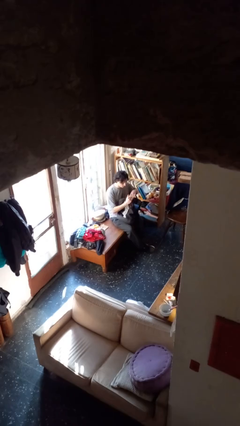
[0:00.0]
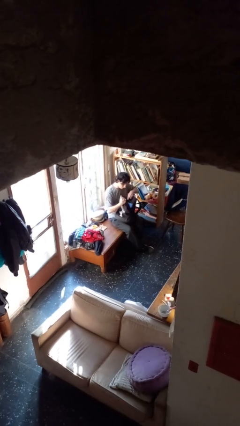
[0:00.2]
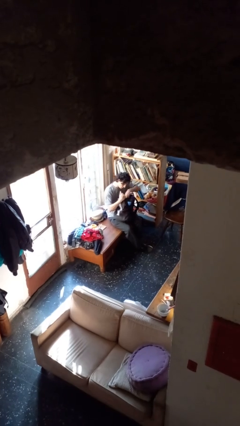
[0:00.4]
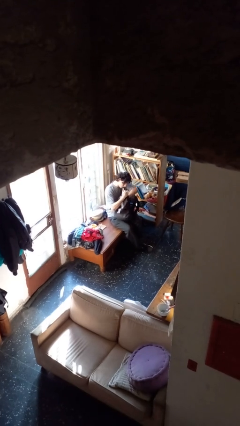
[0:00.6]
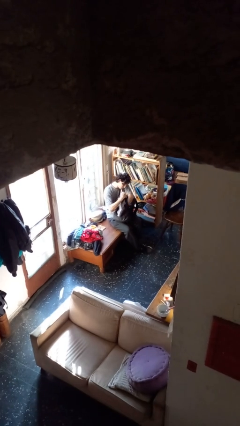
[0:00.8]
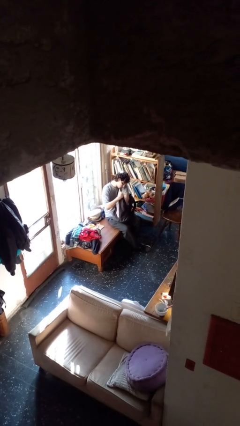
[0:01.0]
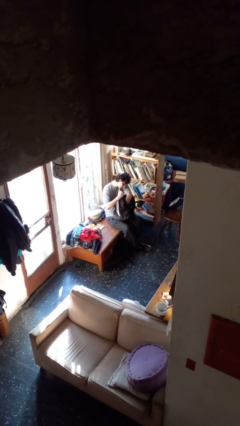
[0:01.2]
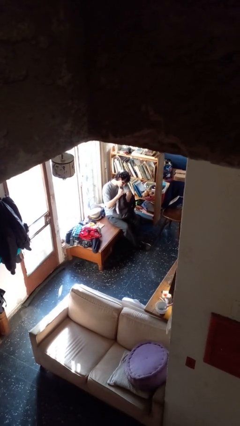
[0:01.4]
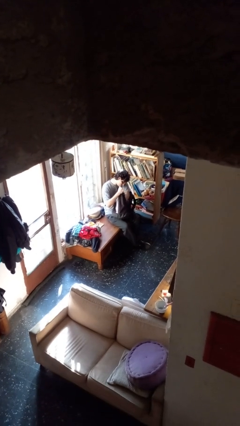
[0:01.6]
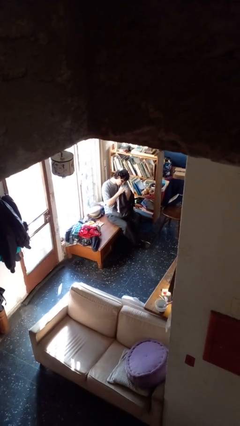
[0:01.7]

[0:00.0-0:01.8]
person searches in backpack

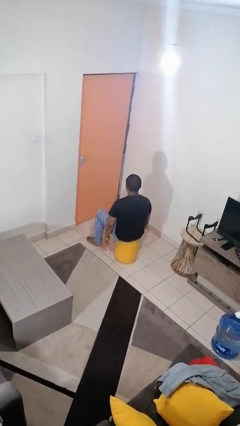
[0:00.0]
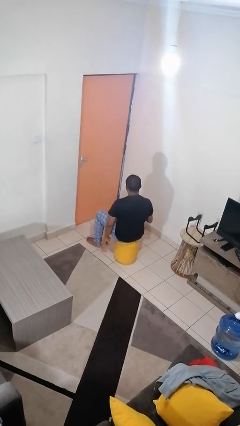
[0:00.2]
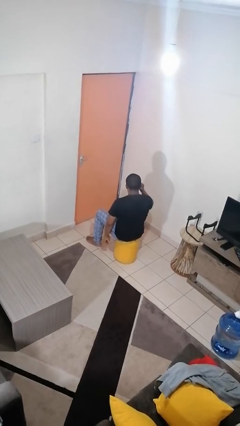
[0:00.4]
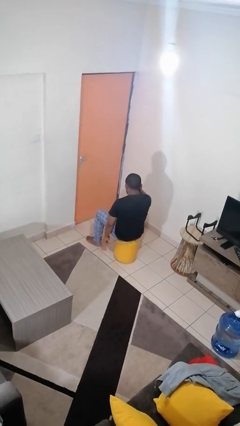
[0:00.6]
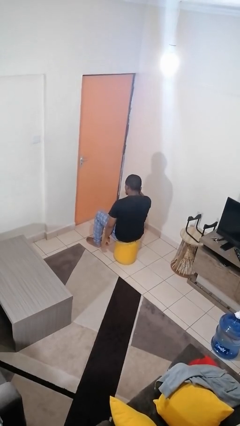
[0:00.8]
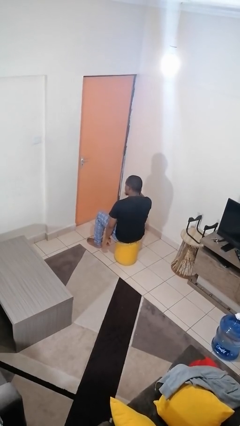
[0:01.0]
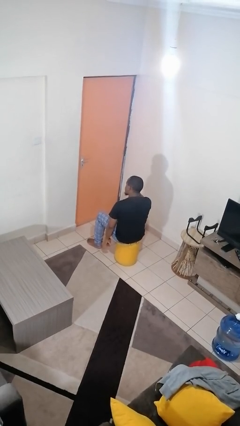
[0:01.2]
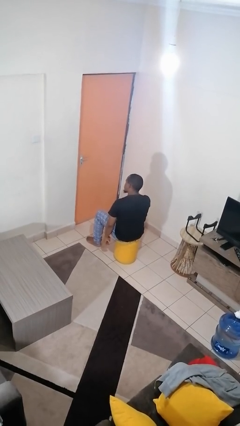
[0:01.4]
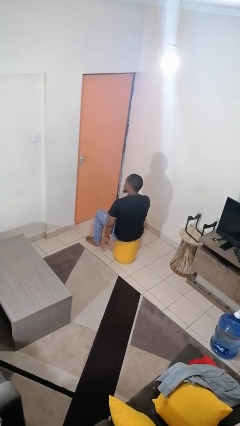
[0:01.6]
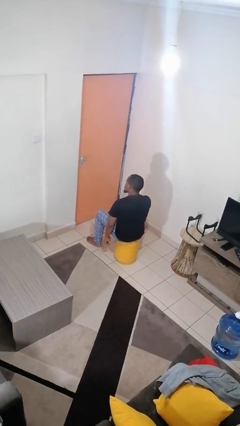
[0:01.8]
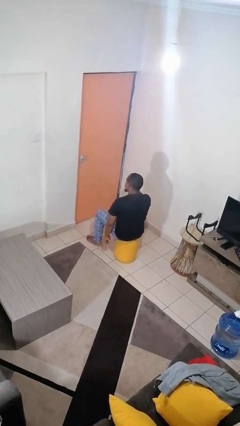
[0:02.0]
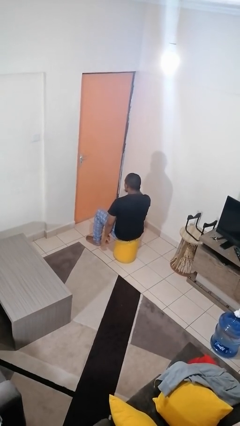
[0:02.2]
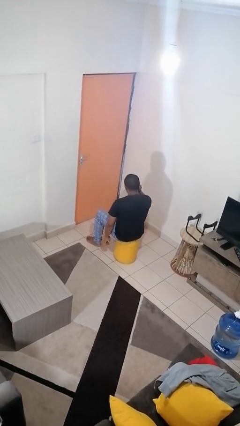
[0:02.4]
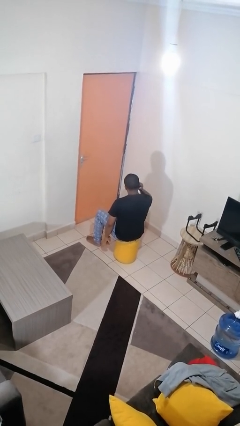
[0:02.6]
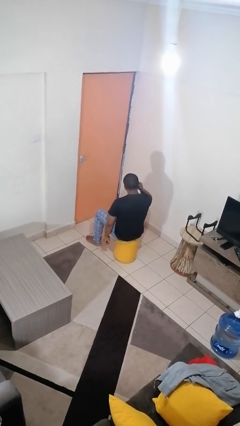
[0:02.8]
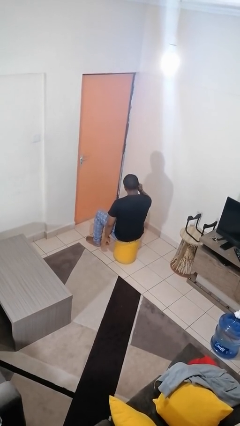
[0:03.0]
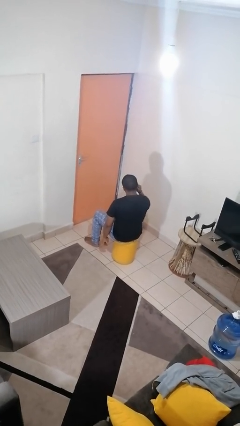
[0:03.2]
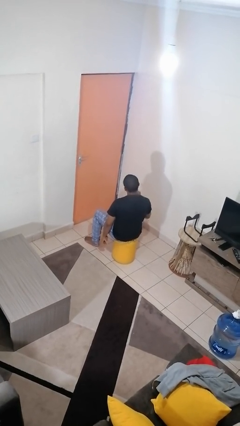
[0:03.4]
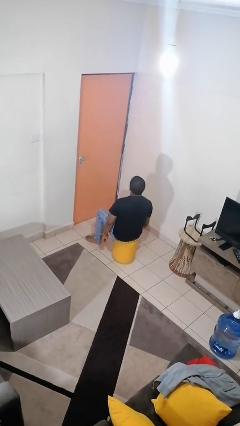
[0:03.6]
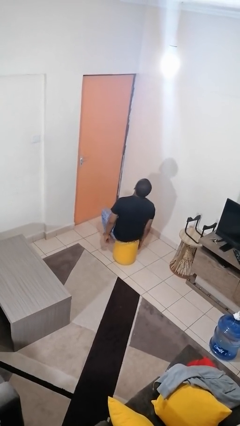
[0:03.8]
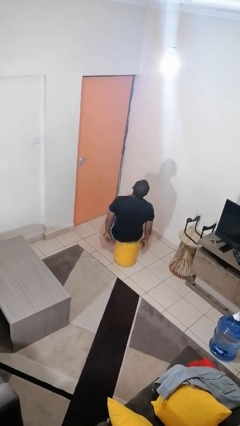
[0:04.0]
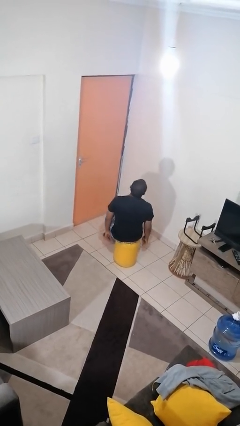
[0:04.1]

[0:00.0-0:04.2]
person touches earlobe

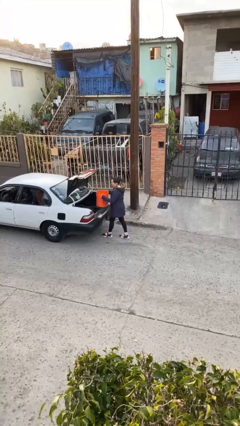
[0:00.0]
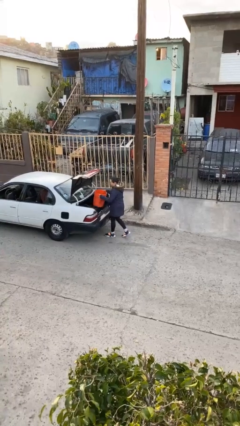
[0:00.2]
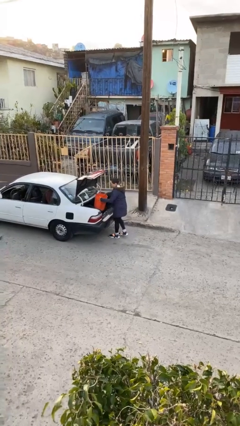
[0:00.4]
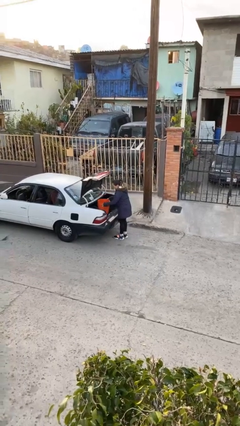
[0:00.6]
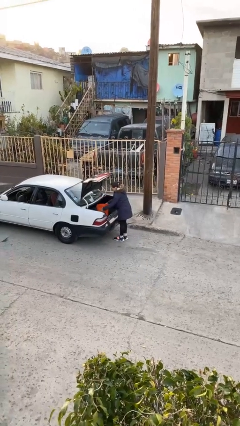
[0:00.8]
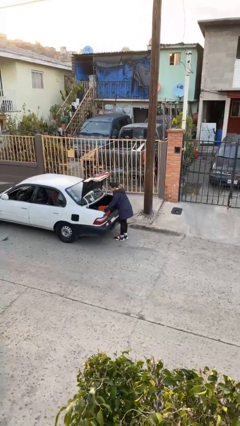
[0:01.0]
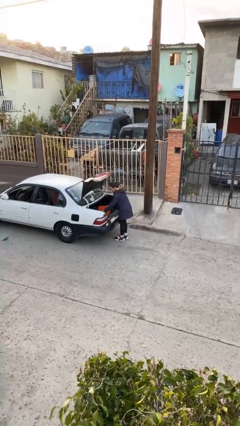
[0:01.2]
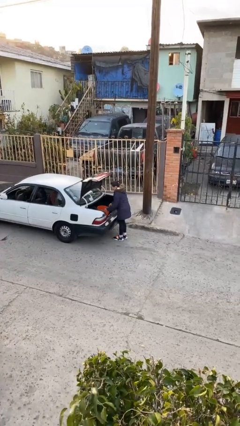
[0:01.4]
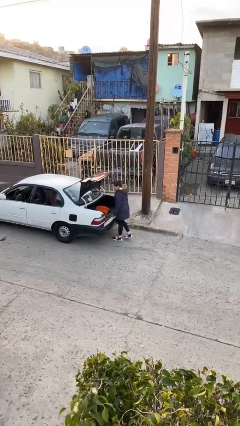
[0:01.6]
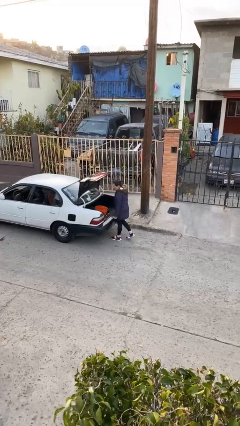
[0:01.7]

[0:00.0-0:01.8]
person loads car

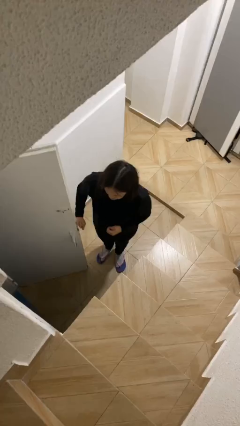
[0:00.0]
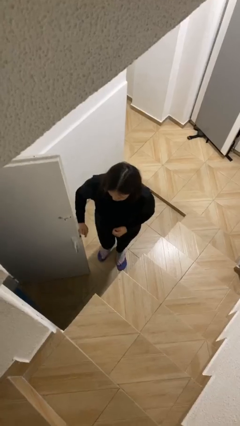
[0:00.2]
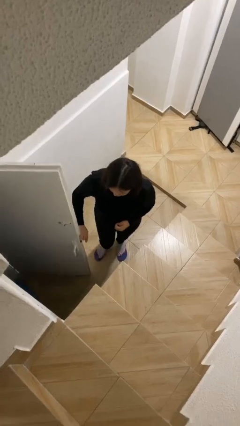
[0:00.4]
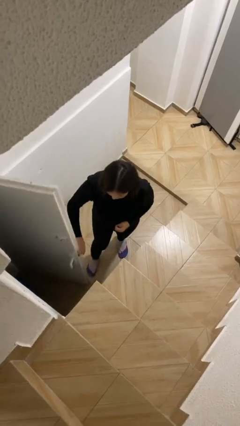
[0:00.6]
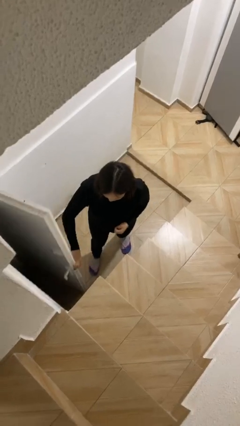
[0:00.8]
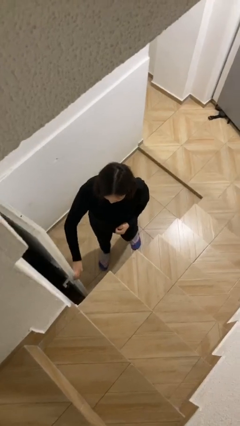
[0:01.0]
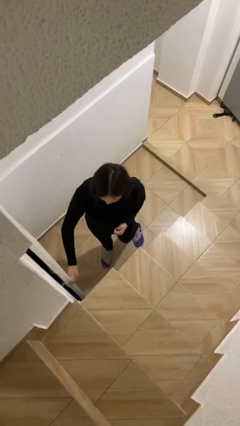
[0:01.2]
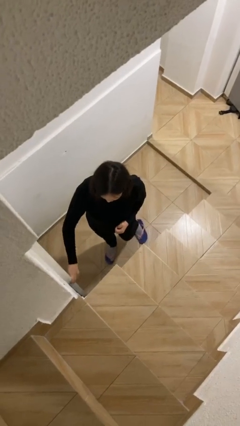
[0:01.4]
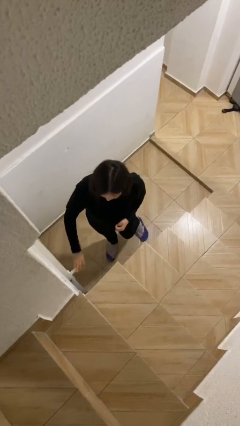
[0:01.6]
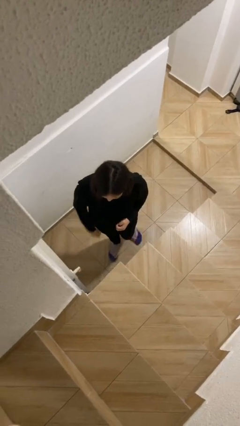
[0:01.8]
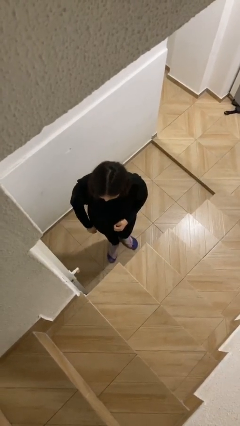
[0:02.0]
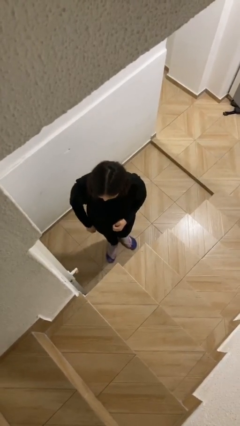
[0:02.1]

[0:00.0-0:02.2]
person closes facility door

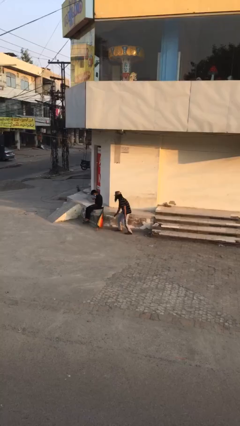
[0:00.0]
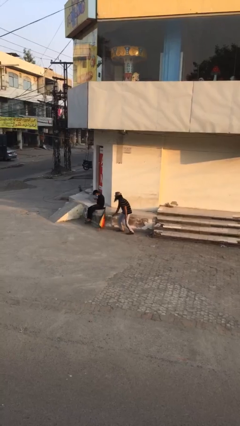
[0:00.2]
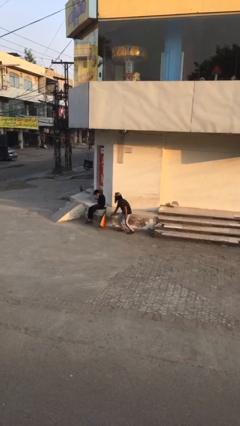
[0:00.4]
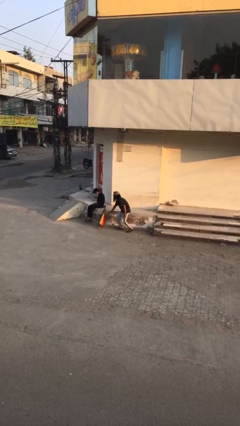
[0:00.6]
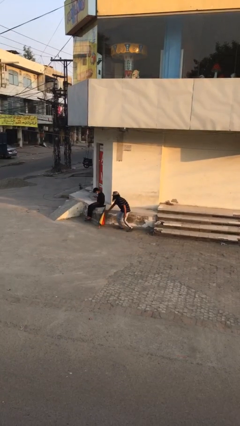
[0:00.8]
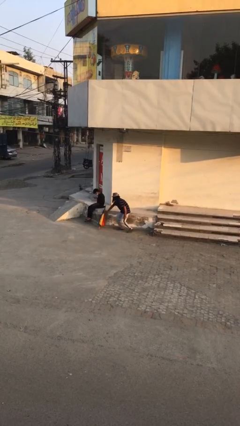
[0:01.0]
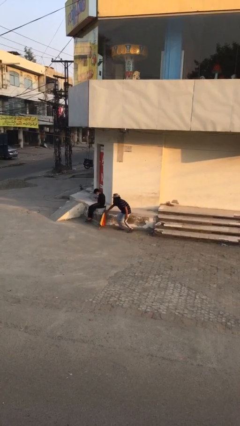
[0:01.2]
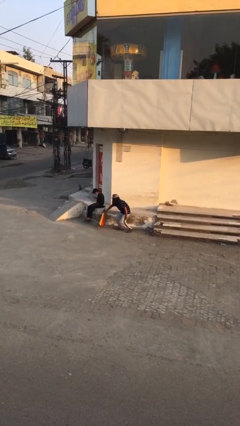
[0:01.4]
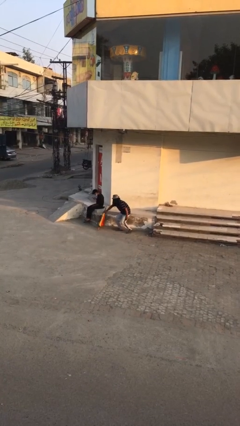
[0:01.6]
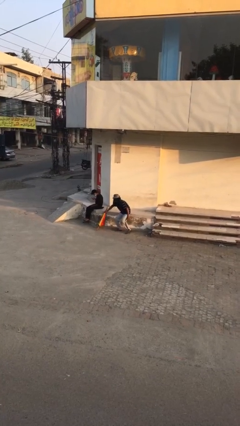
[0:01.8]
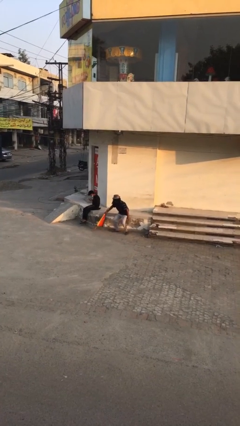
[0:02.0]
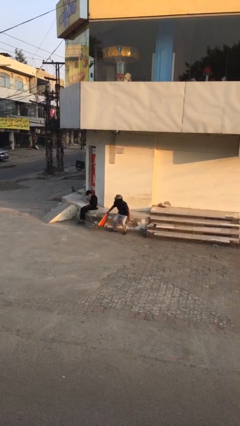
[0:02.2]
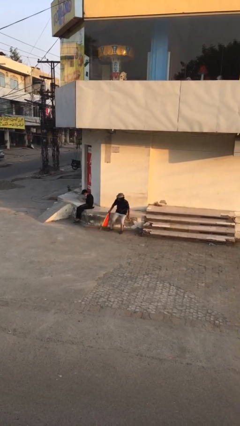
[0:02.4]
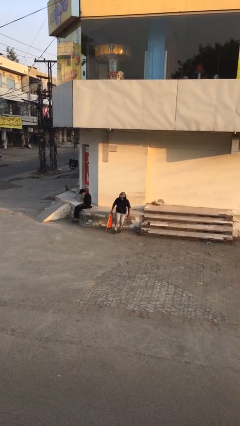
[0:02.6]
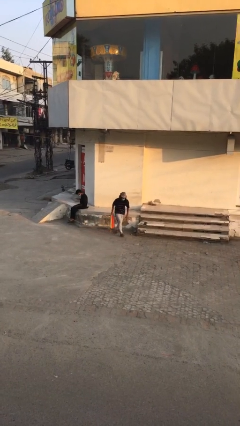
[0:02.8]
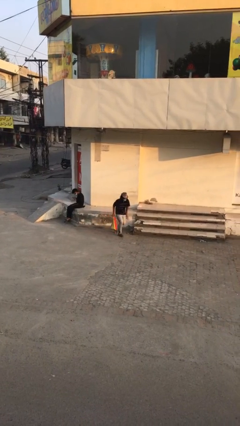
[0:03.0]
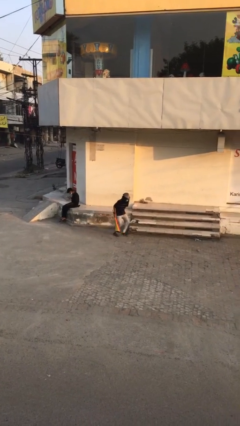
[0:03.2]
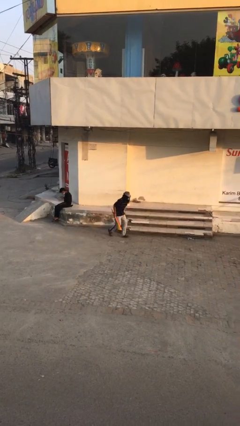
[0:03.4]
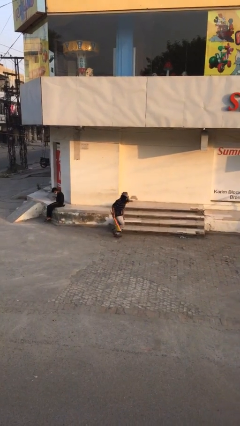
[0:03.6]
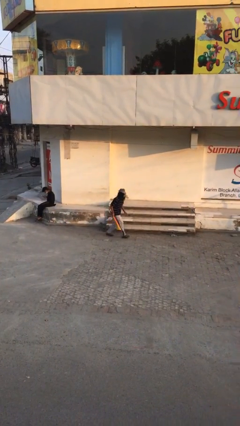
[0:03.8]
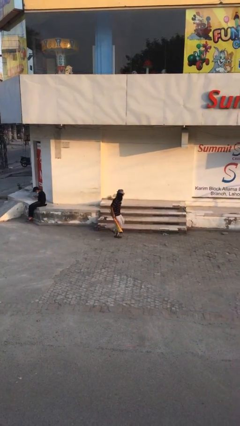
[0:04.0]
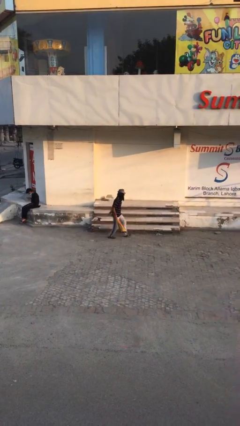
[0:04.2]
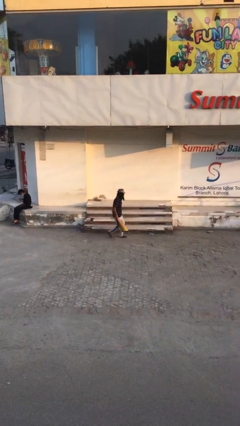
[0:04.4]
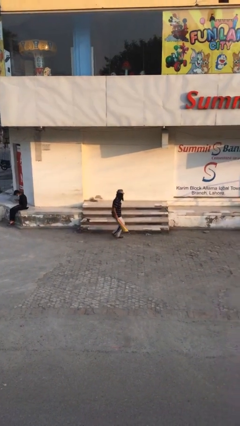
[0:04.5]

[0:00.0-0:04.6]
person steals object from person

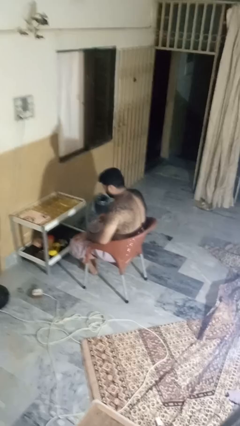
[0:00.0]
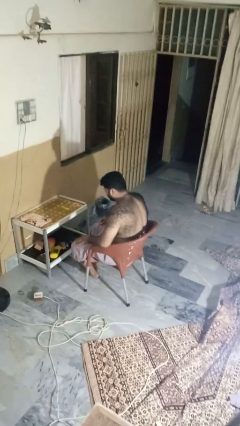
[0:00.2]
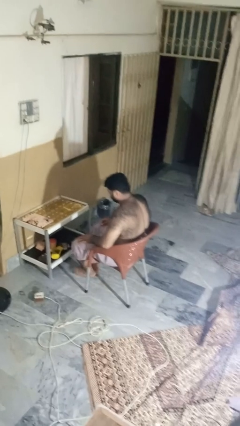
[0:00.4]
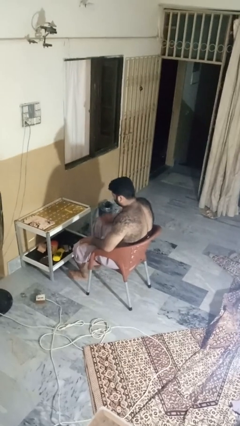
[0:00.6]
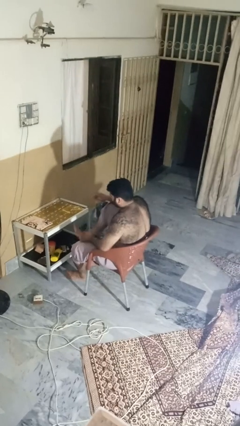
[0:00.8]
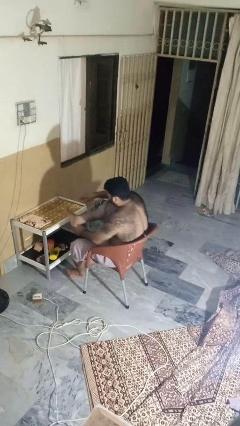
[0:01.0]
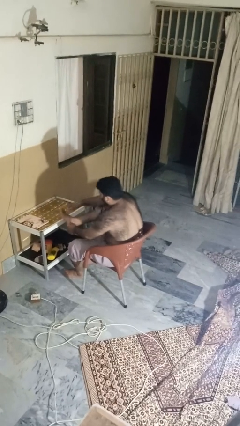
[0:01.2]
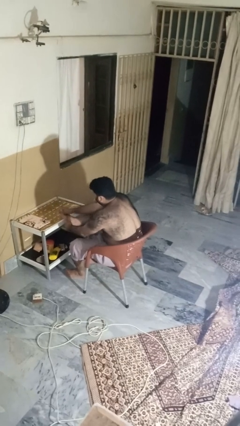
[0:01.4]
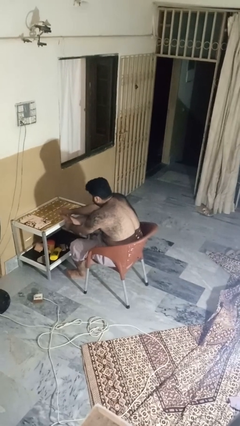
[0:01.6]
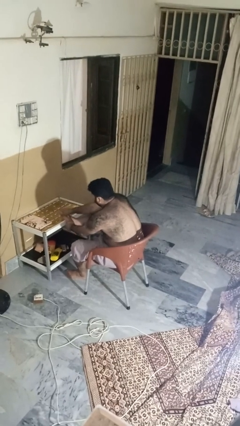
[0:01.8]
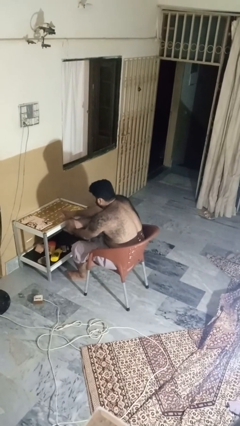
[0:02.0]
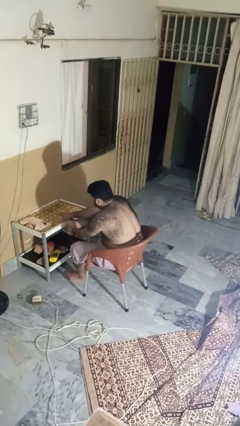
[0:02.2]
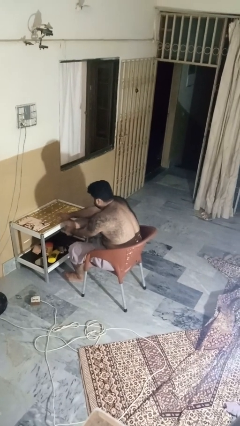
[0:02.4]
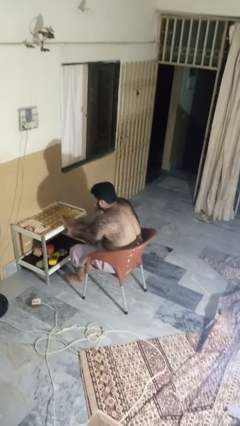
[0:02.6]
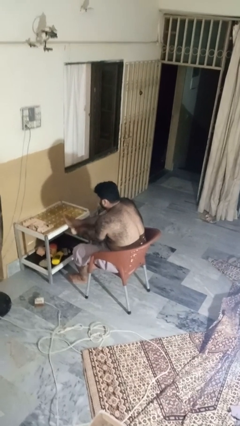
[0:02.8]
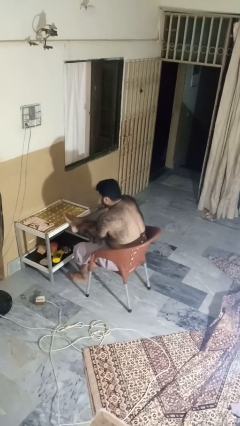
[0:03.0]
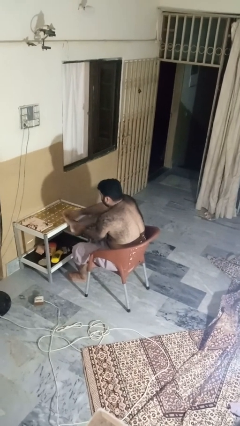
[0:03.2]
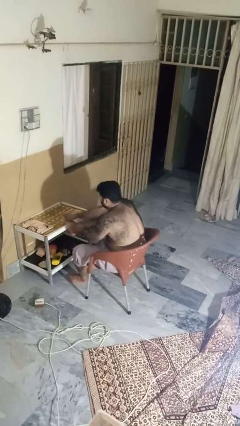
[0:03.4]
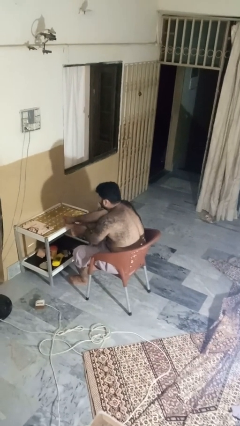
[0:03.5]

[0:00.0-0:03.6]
person stubs toe
